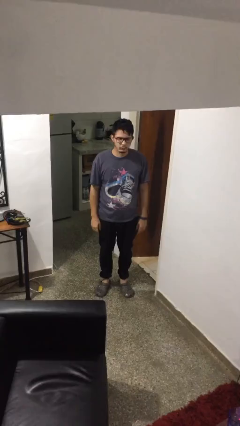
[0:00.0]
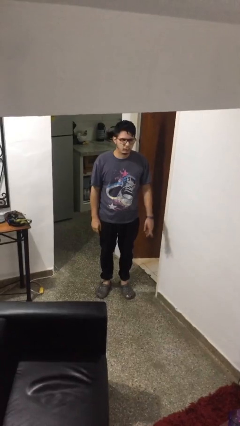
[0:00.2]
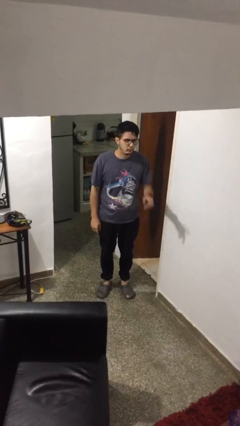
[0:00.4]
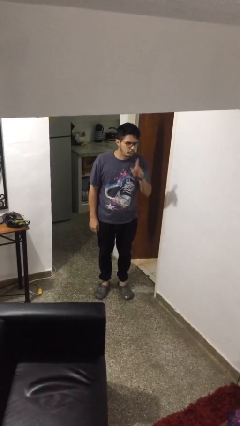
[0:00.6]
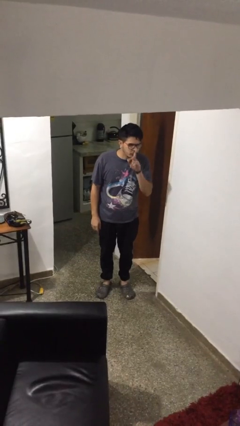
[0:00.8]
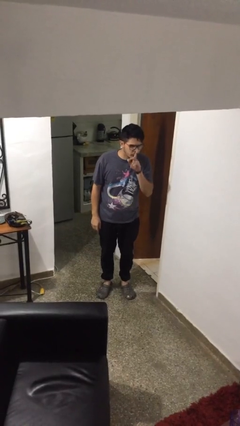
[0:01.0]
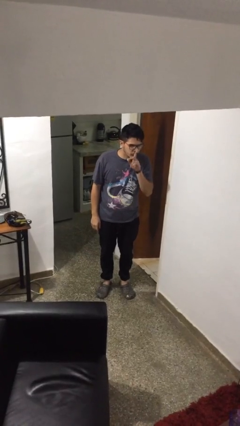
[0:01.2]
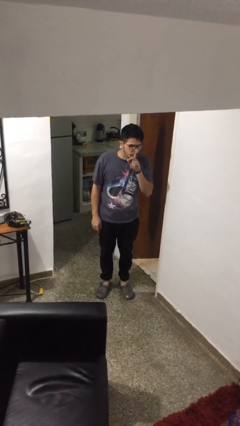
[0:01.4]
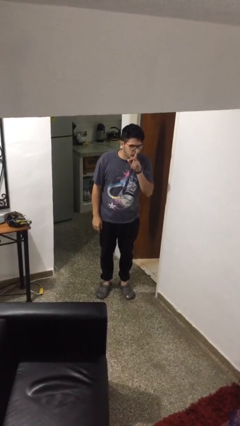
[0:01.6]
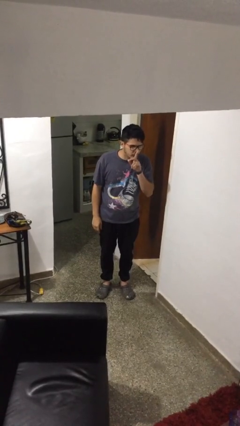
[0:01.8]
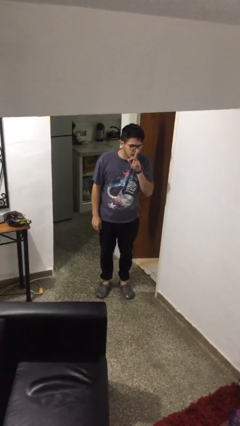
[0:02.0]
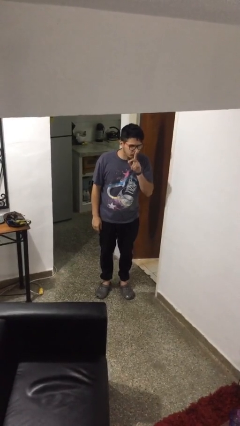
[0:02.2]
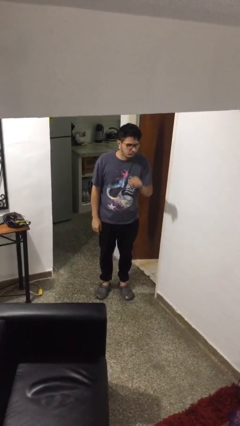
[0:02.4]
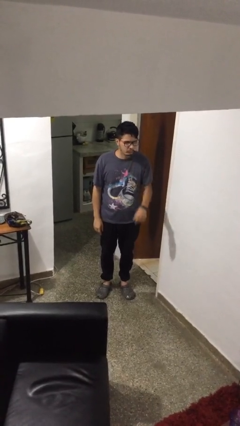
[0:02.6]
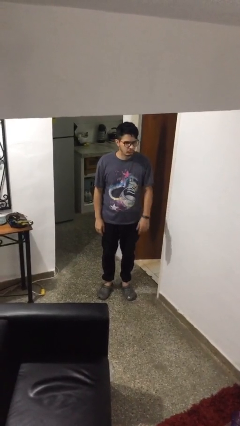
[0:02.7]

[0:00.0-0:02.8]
person gestures be quiet

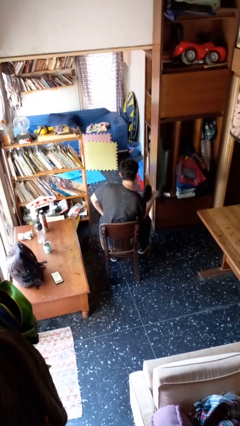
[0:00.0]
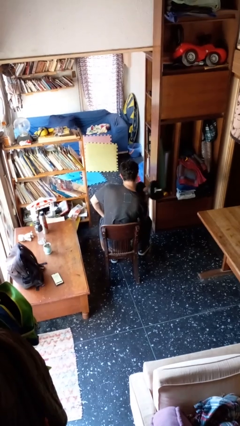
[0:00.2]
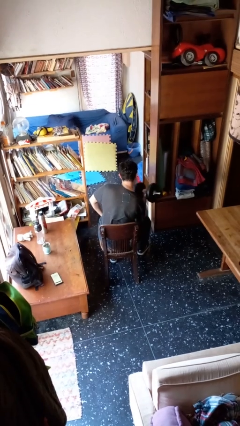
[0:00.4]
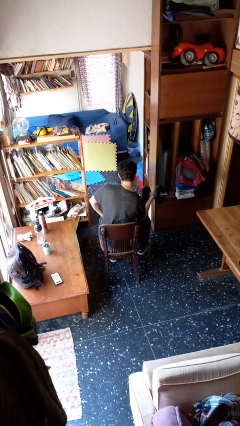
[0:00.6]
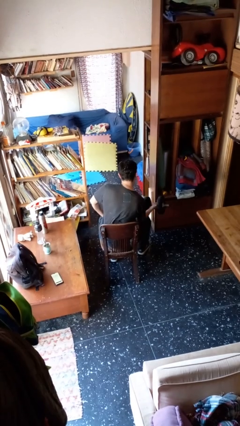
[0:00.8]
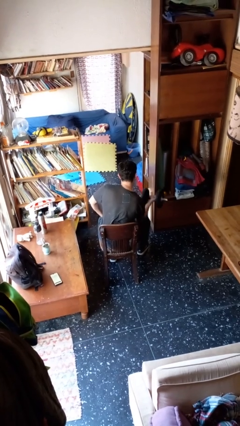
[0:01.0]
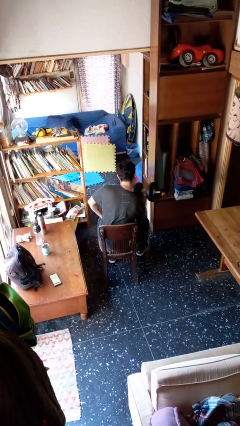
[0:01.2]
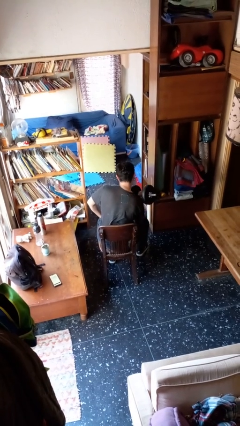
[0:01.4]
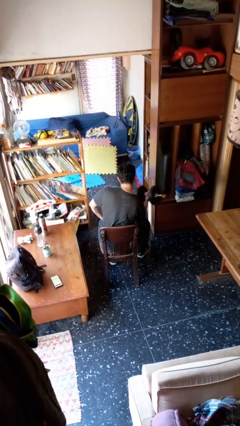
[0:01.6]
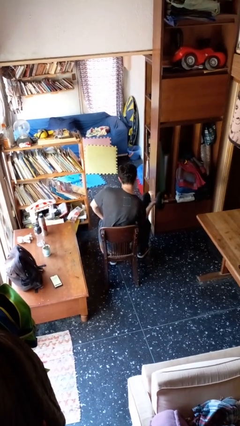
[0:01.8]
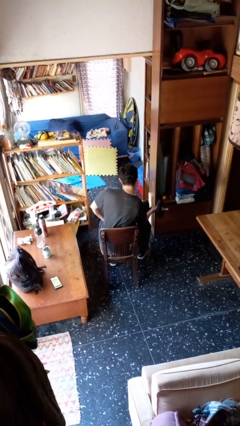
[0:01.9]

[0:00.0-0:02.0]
person lifts dumbbells

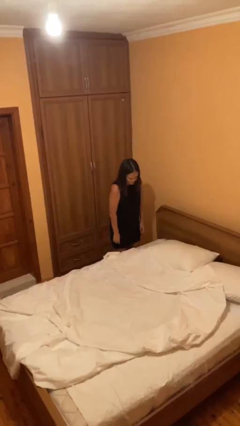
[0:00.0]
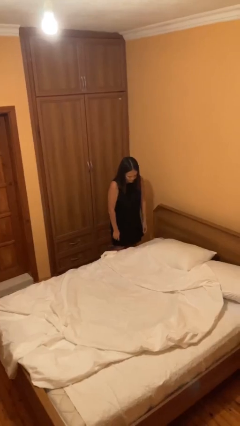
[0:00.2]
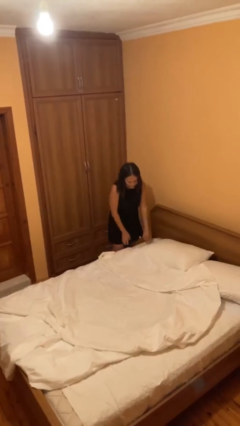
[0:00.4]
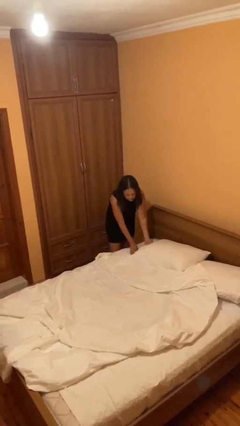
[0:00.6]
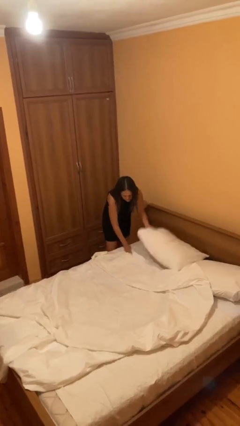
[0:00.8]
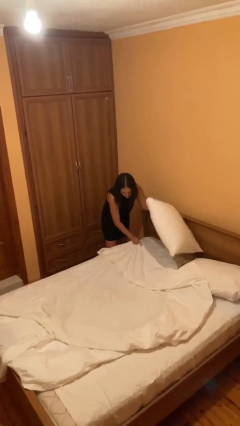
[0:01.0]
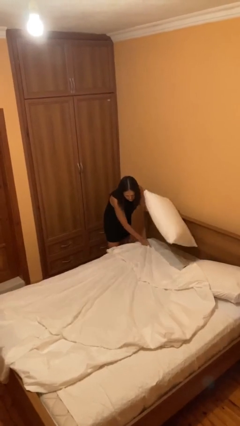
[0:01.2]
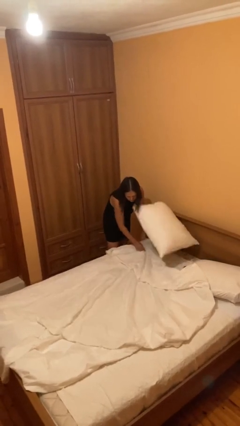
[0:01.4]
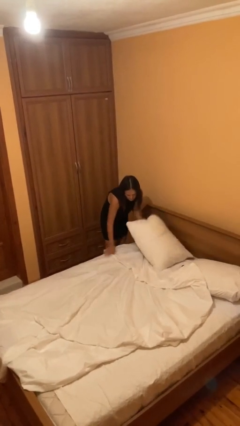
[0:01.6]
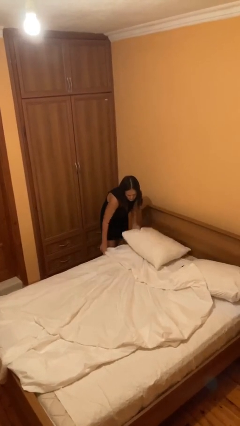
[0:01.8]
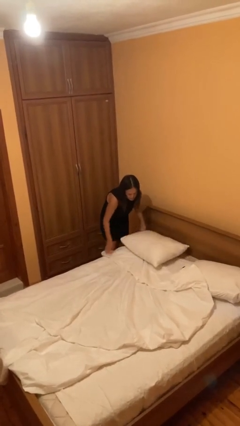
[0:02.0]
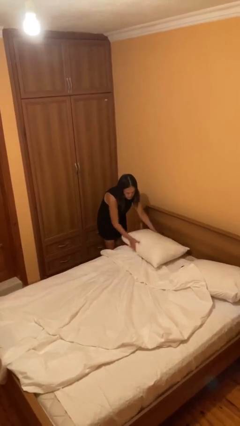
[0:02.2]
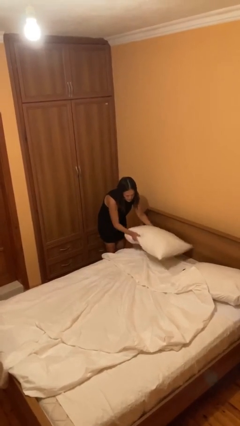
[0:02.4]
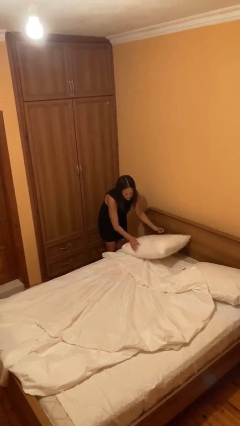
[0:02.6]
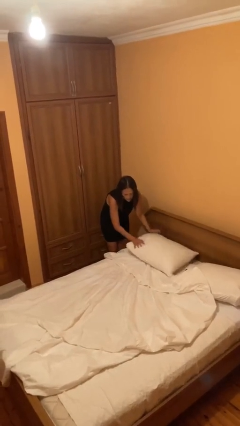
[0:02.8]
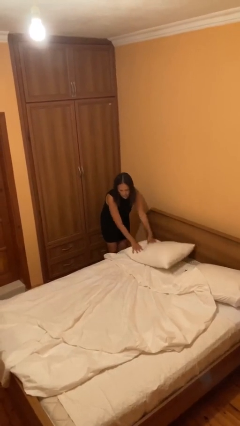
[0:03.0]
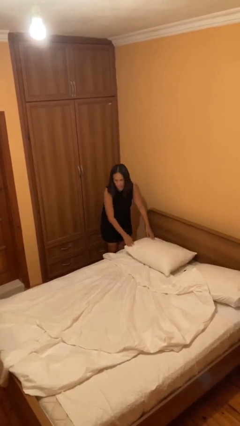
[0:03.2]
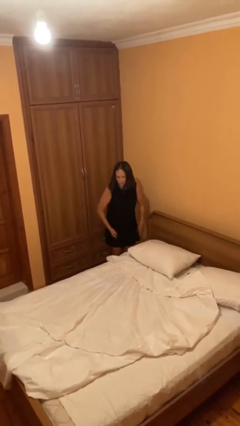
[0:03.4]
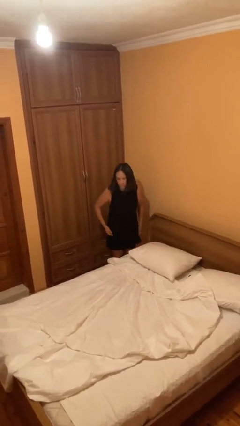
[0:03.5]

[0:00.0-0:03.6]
person makes bed

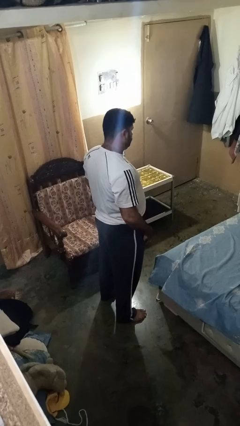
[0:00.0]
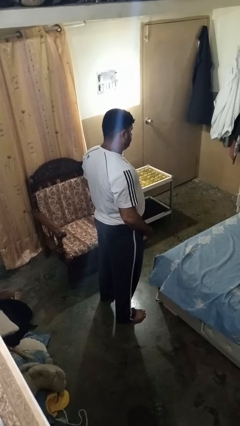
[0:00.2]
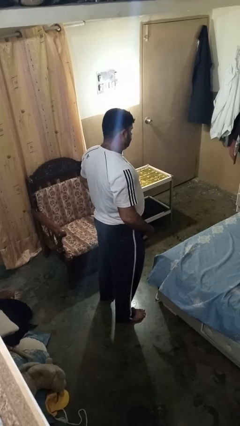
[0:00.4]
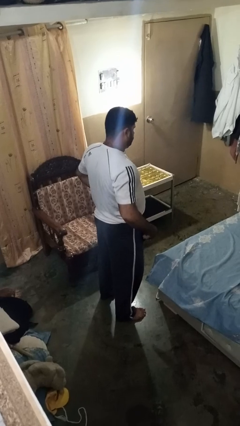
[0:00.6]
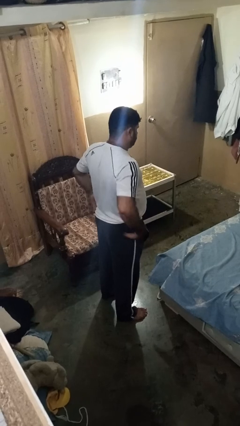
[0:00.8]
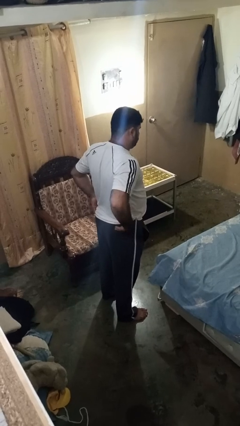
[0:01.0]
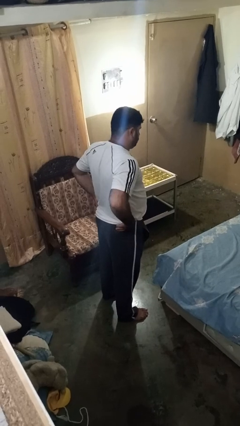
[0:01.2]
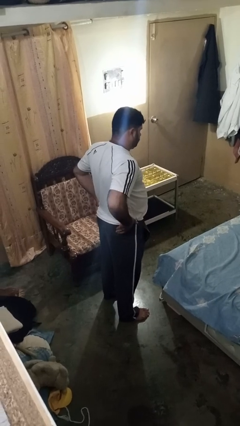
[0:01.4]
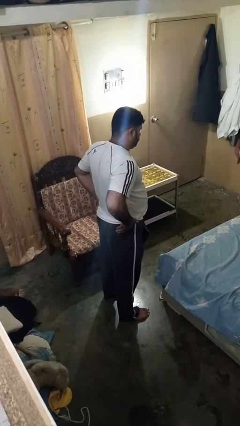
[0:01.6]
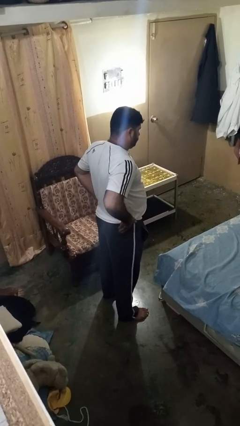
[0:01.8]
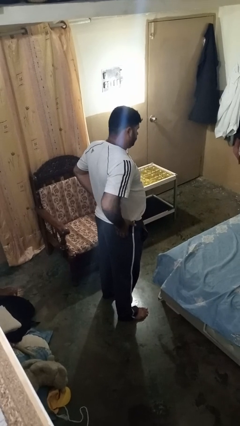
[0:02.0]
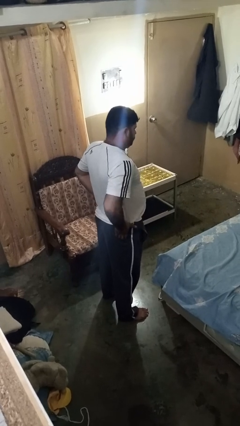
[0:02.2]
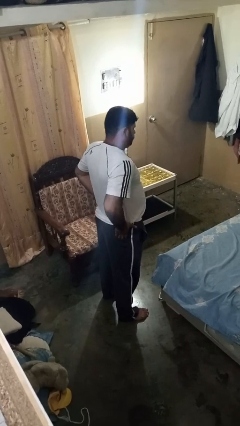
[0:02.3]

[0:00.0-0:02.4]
person puts hands in back pockets

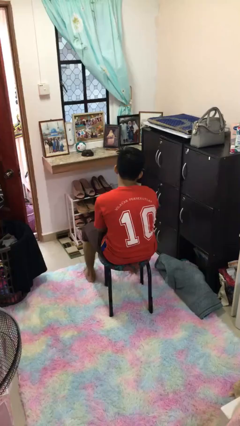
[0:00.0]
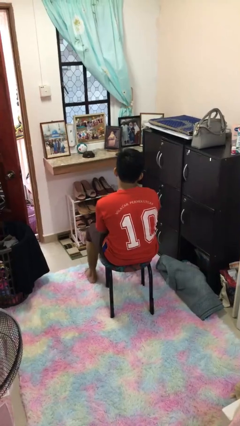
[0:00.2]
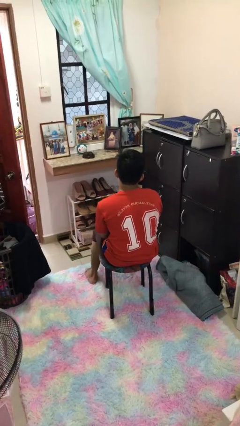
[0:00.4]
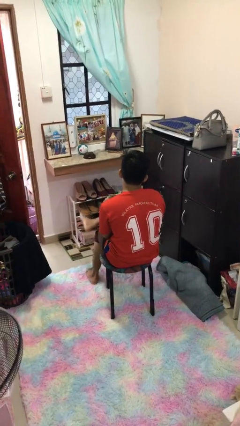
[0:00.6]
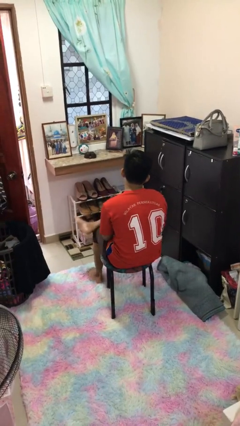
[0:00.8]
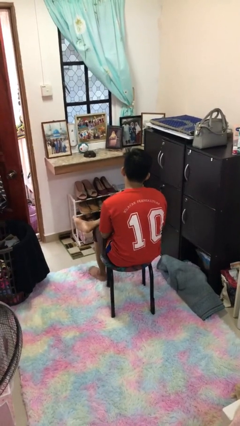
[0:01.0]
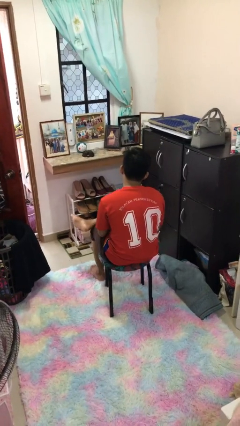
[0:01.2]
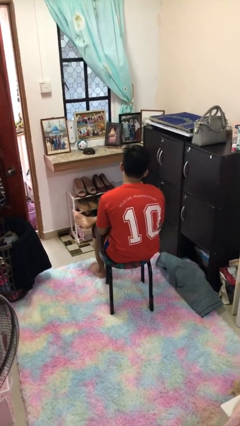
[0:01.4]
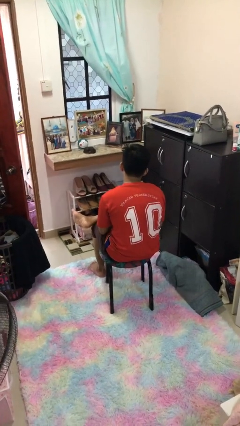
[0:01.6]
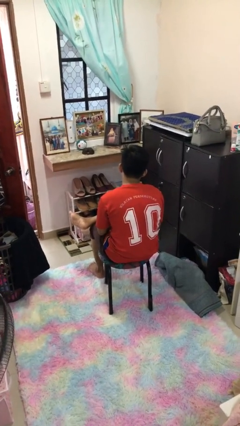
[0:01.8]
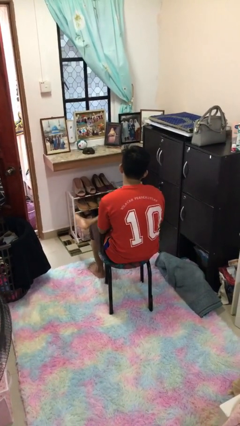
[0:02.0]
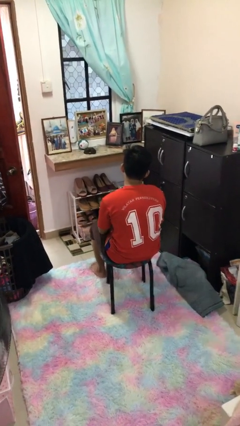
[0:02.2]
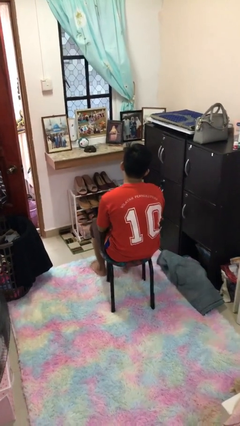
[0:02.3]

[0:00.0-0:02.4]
person crosses legs

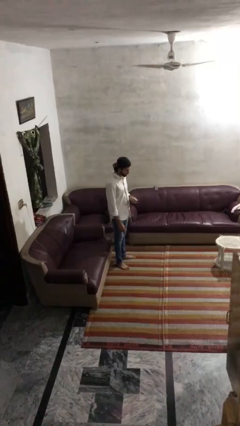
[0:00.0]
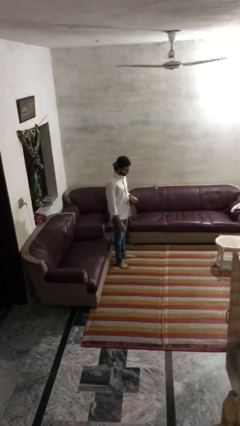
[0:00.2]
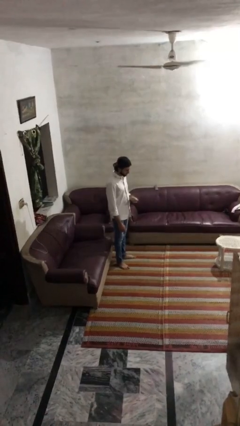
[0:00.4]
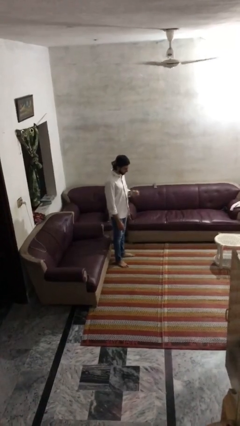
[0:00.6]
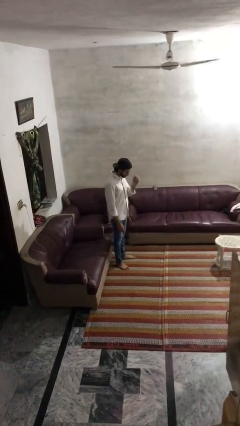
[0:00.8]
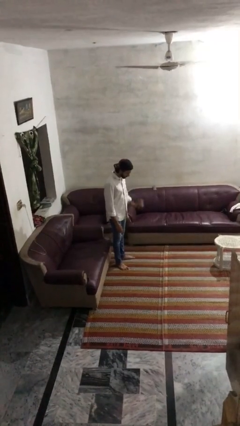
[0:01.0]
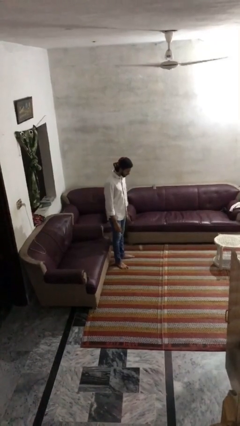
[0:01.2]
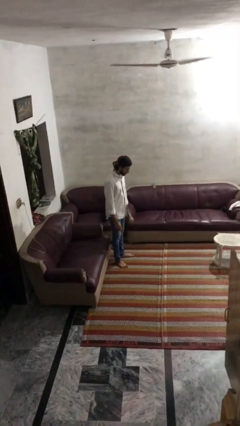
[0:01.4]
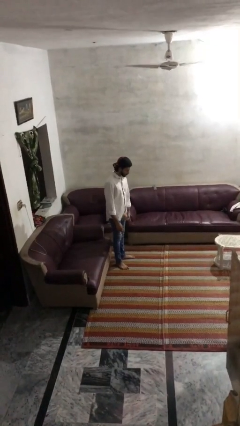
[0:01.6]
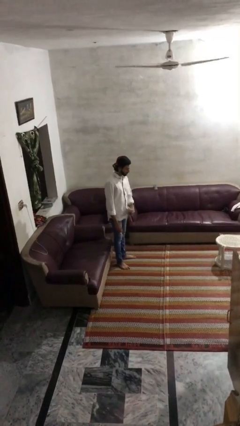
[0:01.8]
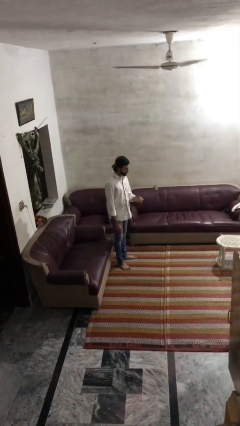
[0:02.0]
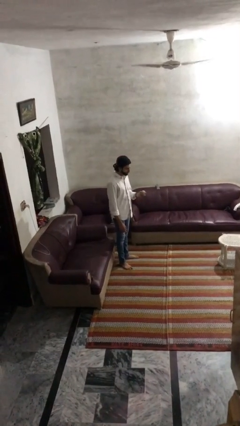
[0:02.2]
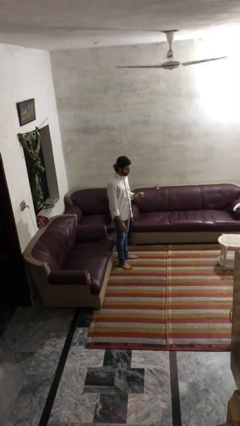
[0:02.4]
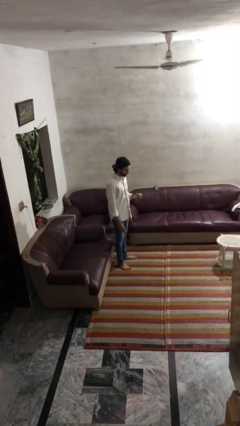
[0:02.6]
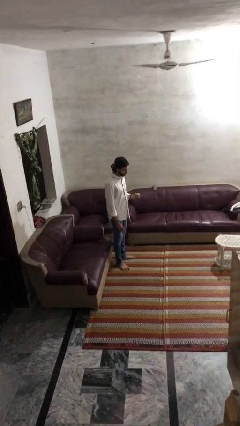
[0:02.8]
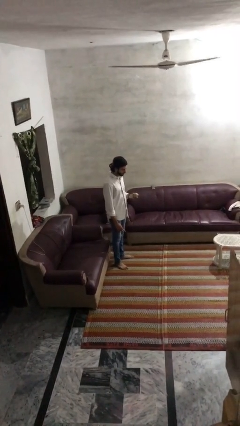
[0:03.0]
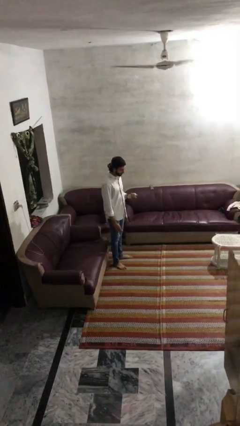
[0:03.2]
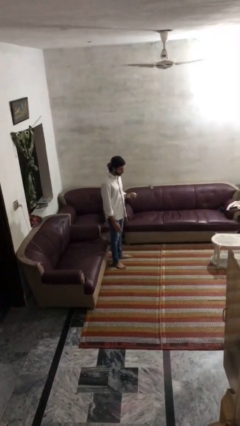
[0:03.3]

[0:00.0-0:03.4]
person bounces ball on floor

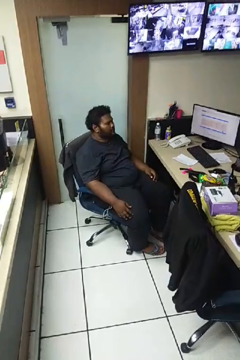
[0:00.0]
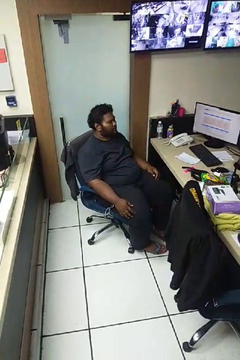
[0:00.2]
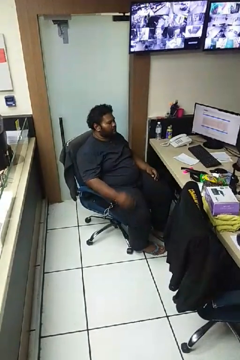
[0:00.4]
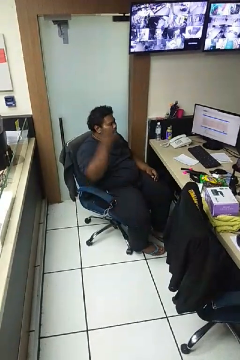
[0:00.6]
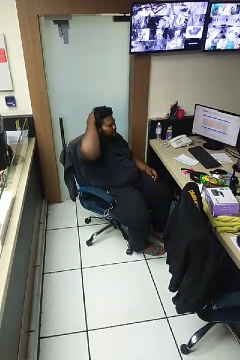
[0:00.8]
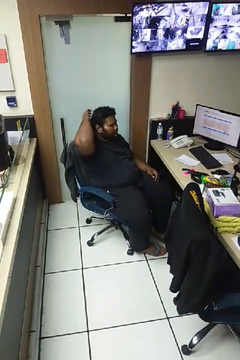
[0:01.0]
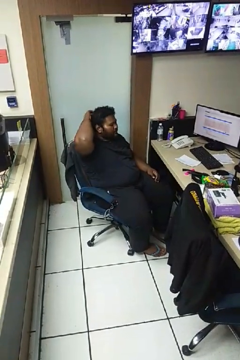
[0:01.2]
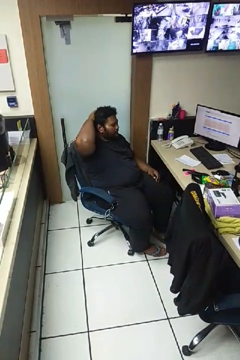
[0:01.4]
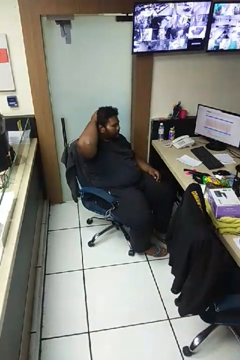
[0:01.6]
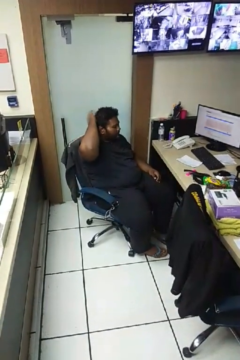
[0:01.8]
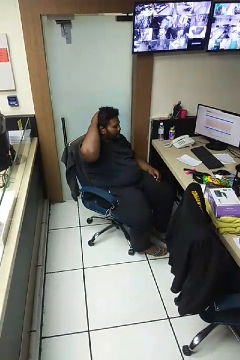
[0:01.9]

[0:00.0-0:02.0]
person pats head